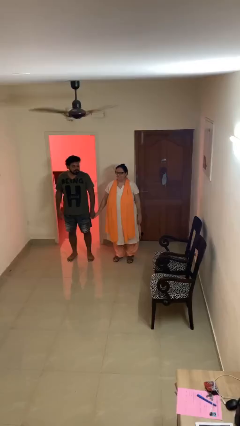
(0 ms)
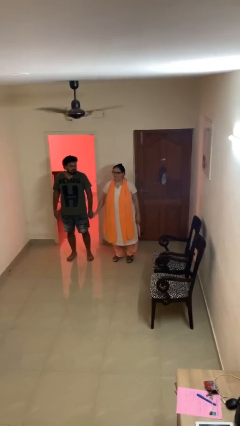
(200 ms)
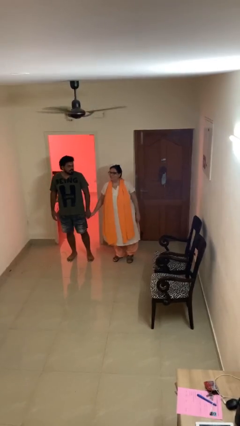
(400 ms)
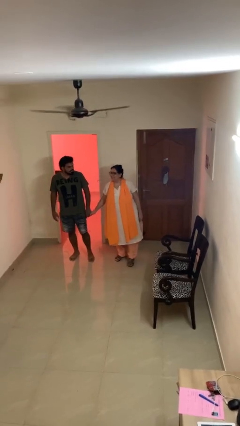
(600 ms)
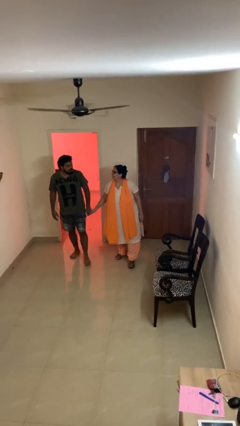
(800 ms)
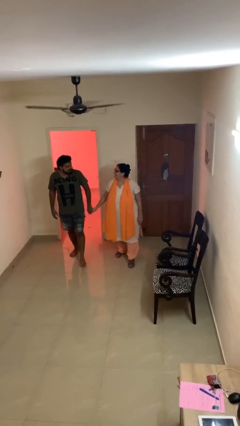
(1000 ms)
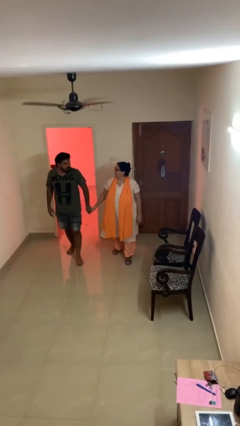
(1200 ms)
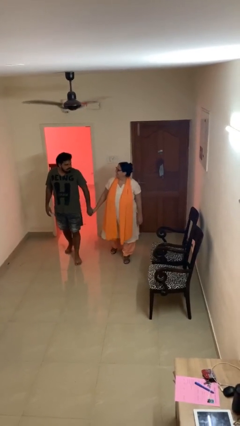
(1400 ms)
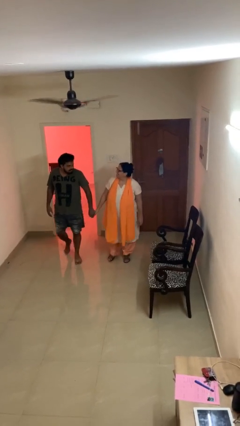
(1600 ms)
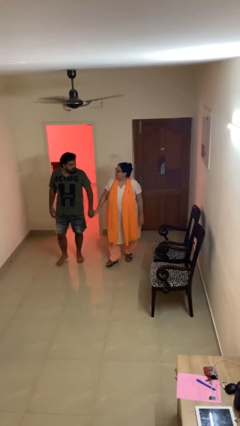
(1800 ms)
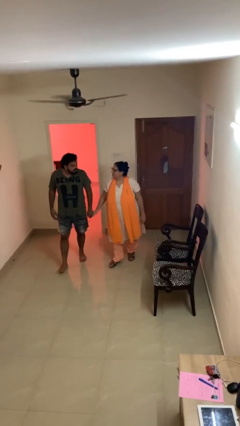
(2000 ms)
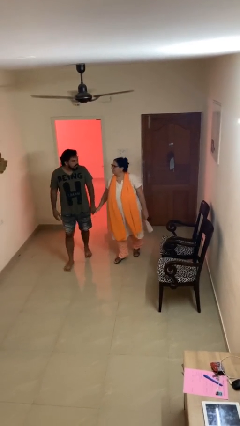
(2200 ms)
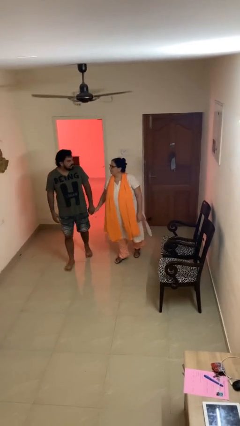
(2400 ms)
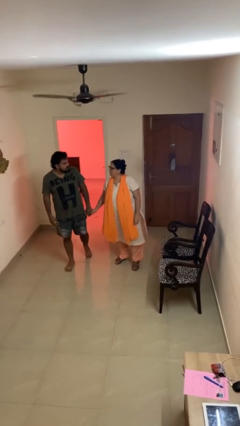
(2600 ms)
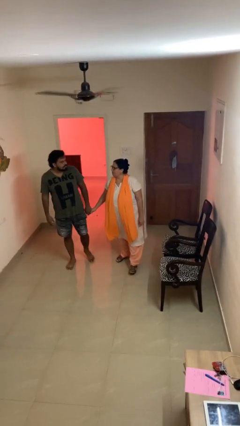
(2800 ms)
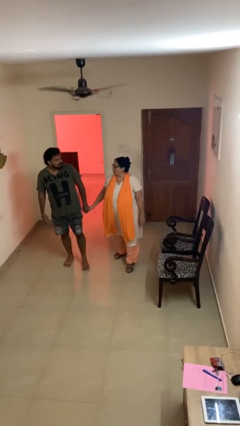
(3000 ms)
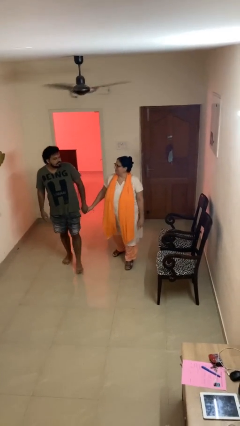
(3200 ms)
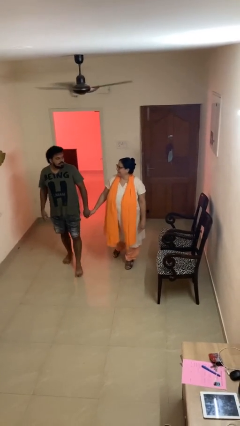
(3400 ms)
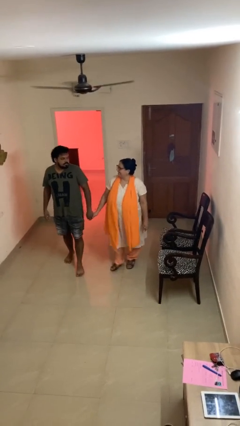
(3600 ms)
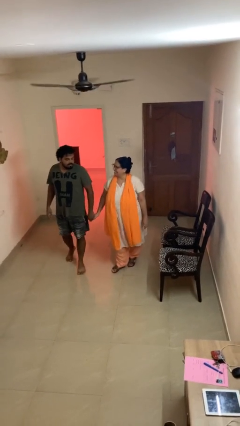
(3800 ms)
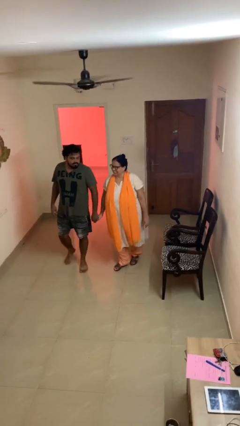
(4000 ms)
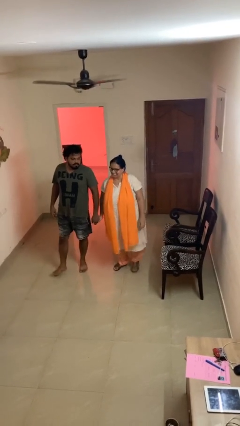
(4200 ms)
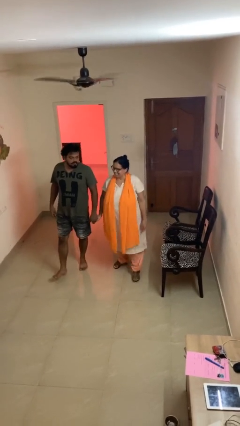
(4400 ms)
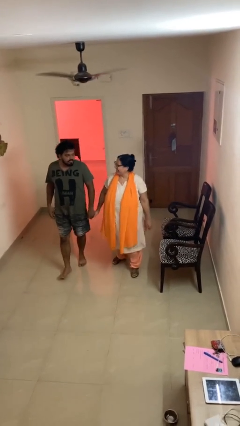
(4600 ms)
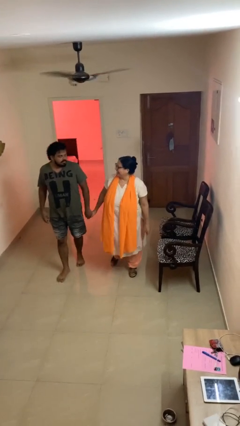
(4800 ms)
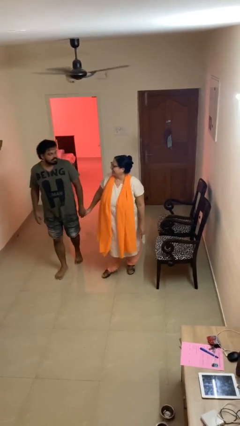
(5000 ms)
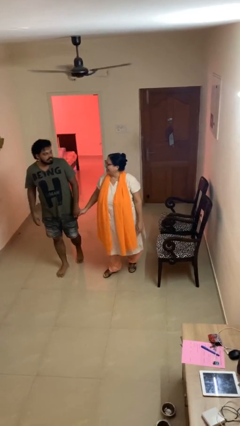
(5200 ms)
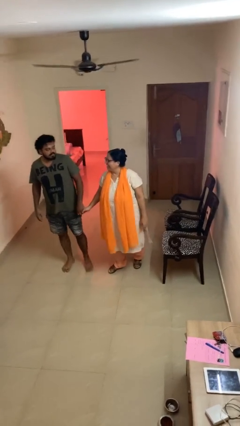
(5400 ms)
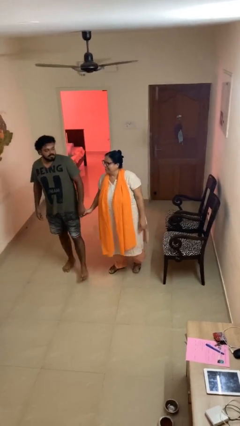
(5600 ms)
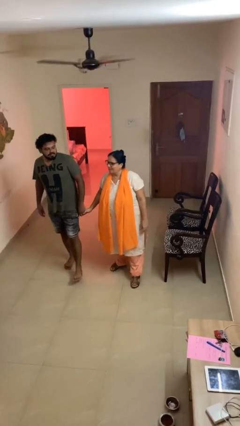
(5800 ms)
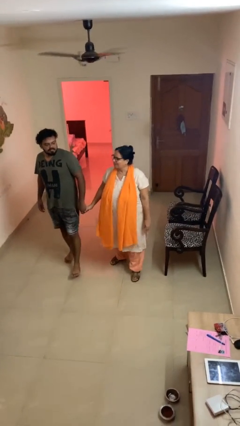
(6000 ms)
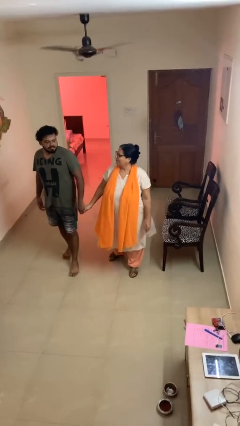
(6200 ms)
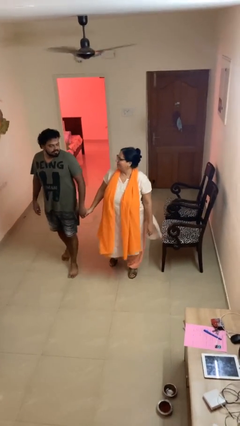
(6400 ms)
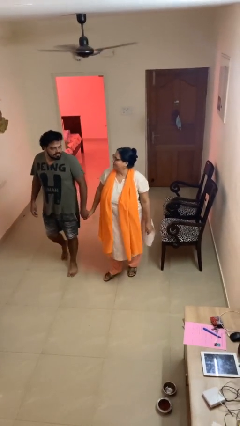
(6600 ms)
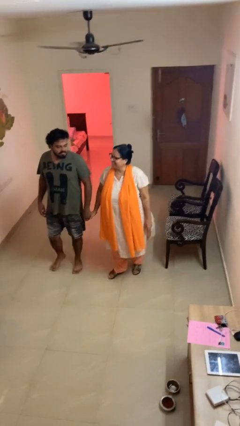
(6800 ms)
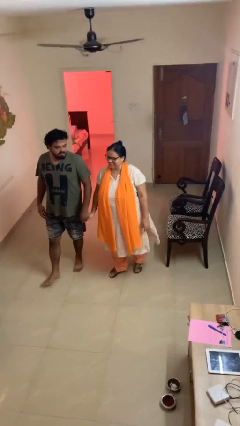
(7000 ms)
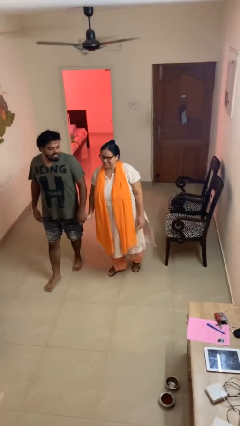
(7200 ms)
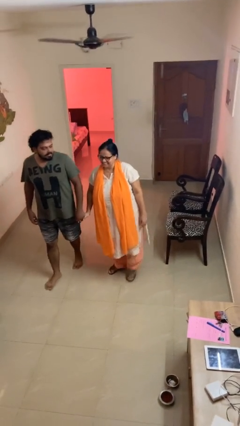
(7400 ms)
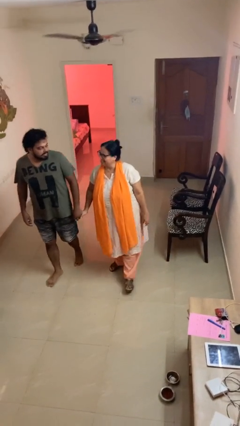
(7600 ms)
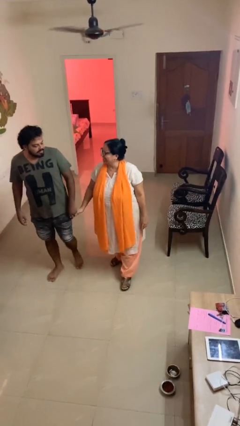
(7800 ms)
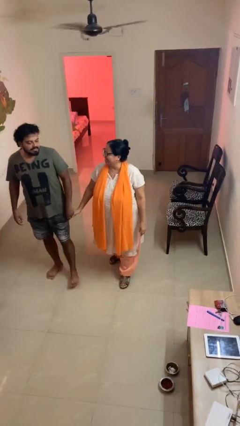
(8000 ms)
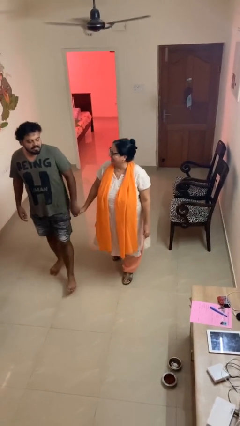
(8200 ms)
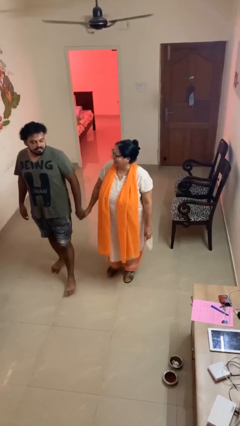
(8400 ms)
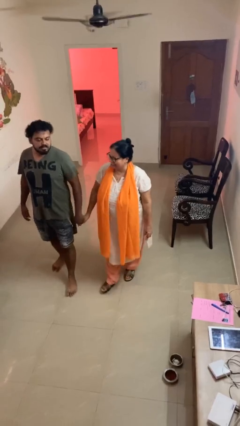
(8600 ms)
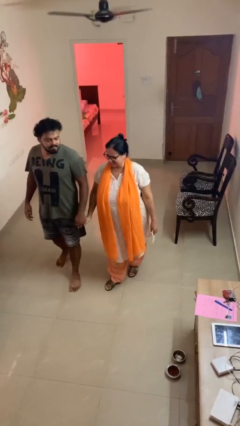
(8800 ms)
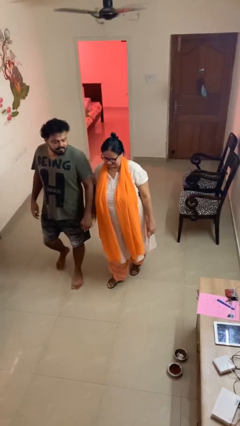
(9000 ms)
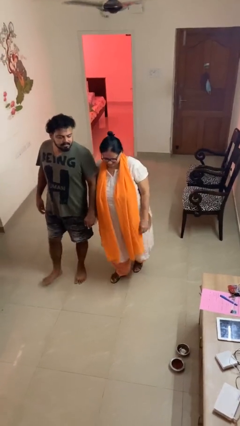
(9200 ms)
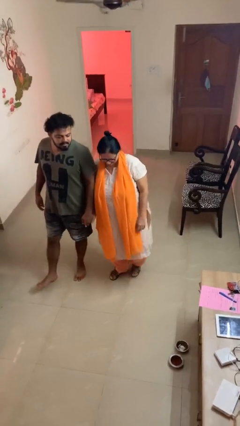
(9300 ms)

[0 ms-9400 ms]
person holds hand

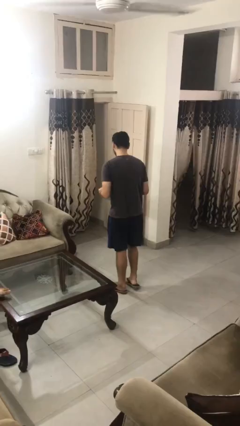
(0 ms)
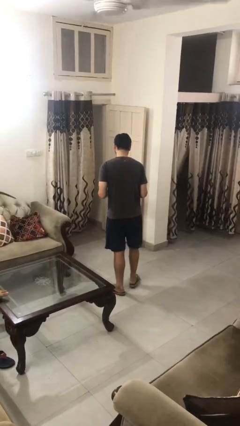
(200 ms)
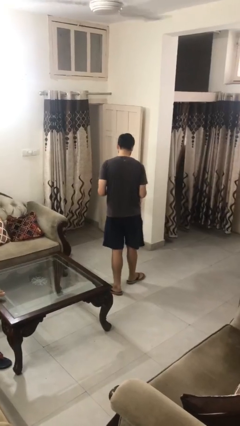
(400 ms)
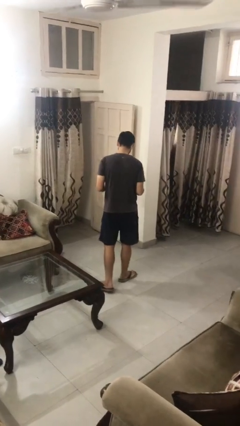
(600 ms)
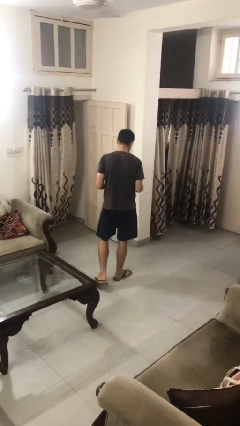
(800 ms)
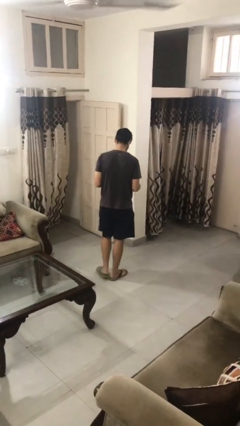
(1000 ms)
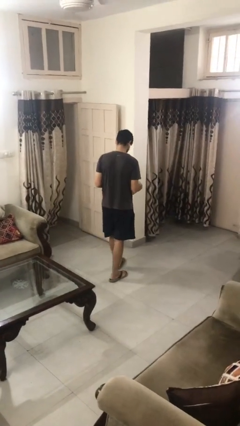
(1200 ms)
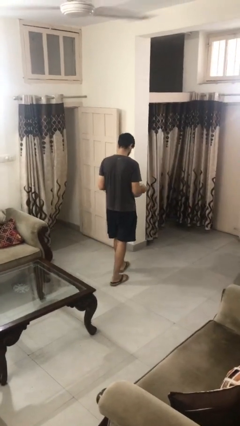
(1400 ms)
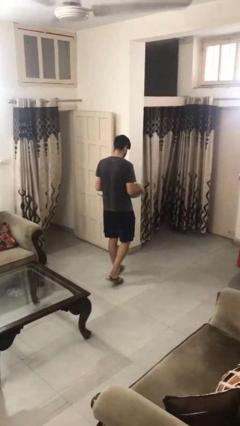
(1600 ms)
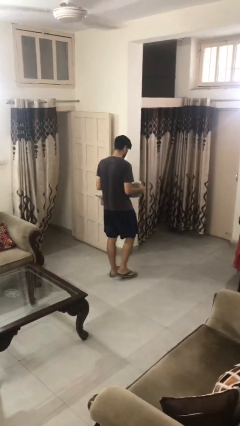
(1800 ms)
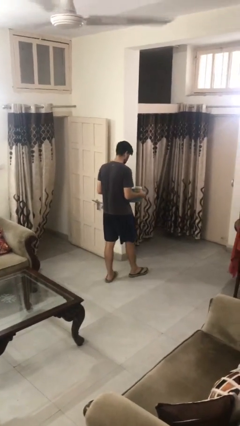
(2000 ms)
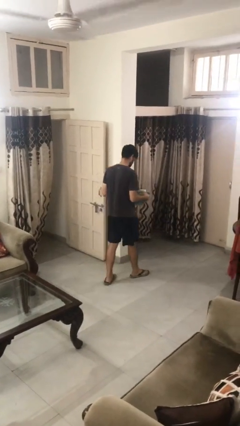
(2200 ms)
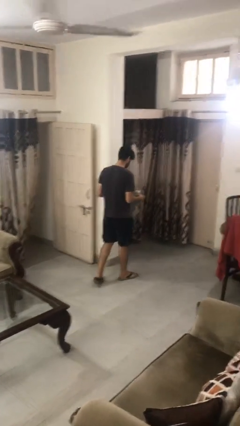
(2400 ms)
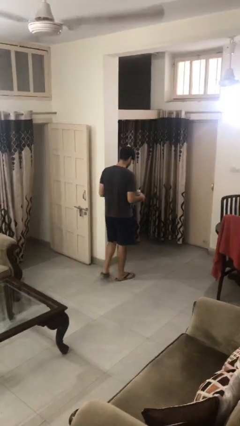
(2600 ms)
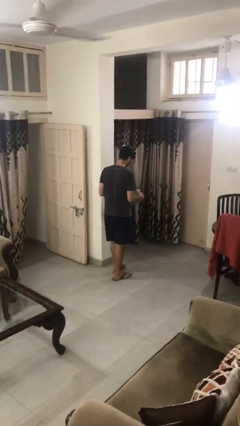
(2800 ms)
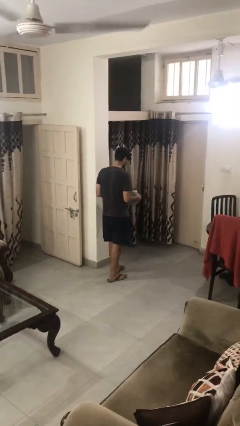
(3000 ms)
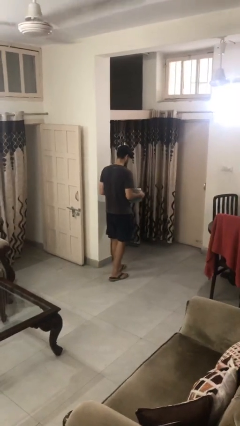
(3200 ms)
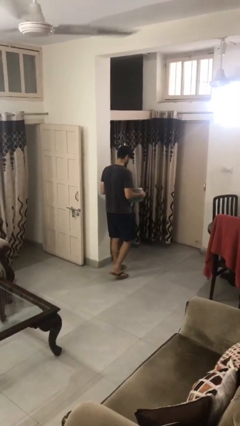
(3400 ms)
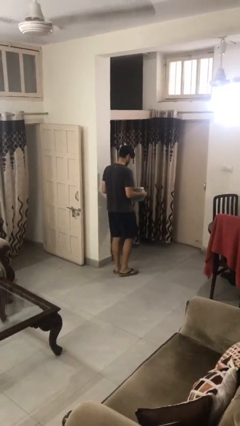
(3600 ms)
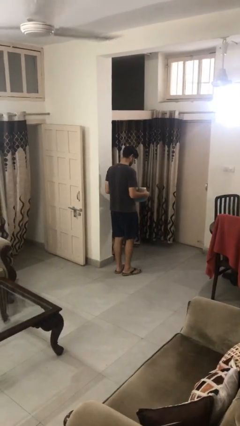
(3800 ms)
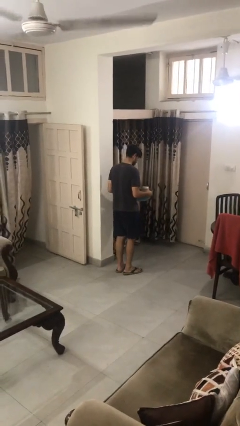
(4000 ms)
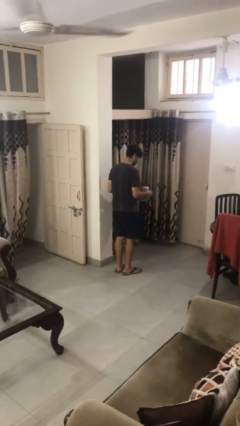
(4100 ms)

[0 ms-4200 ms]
person carries groceries

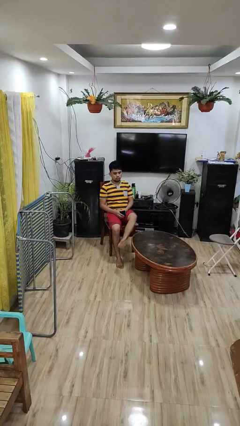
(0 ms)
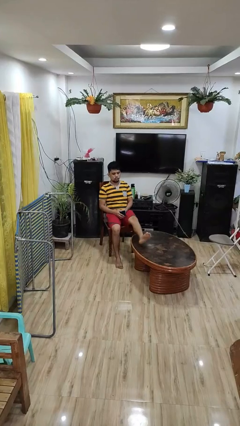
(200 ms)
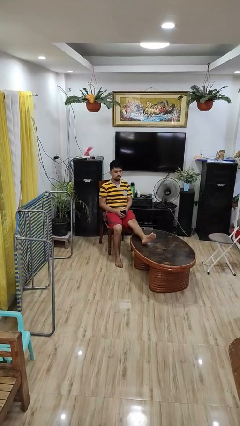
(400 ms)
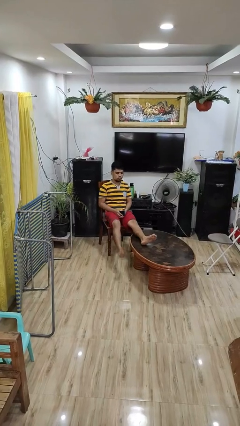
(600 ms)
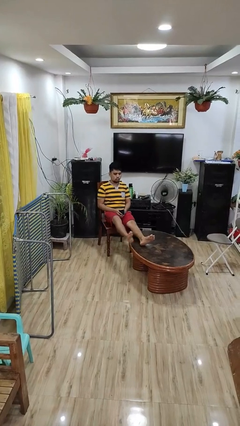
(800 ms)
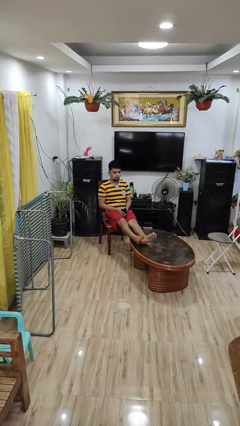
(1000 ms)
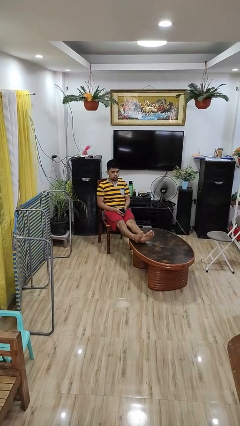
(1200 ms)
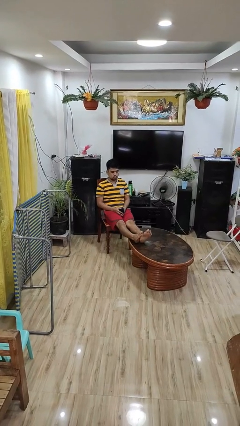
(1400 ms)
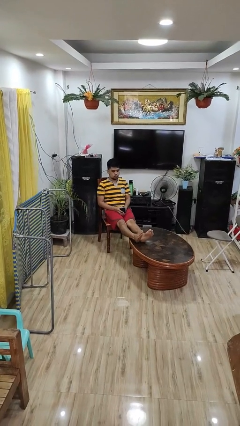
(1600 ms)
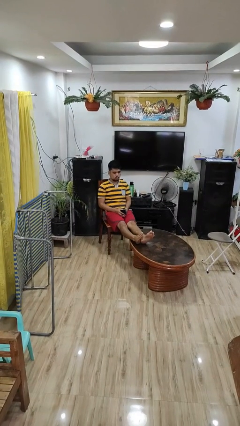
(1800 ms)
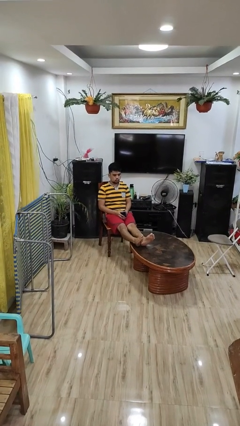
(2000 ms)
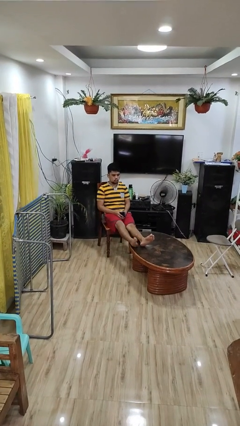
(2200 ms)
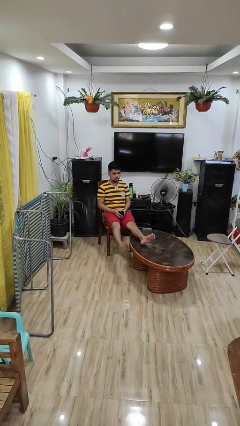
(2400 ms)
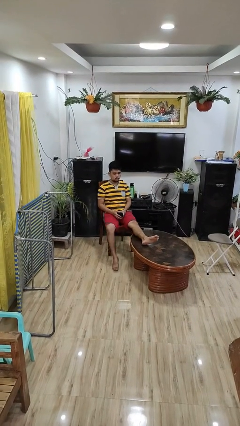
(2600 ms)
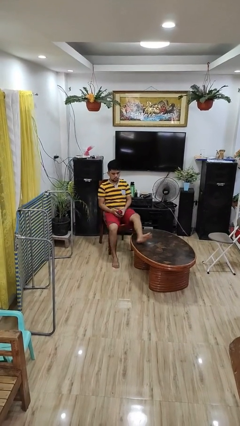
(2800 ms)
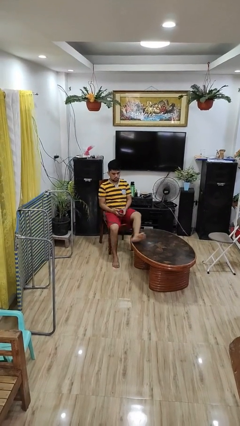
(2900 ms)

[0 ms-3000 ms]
person puts feet up

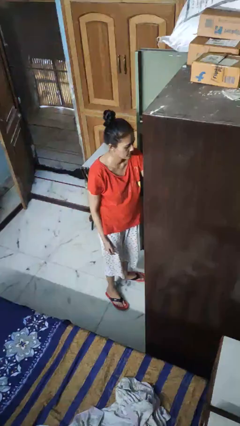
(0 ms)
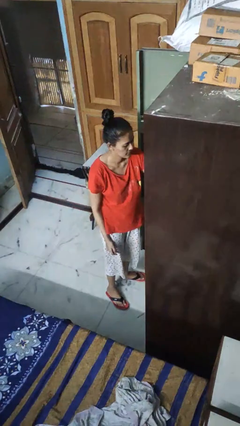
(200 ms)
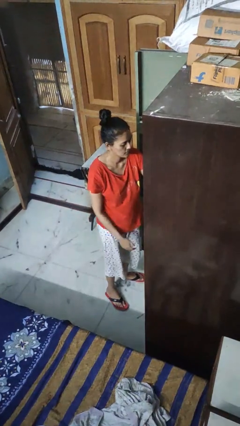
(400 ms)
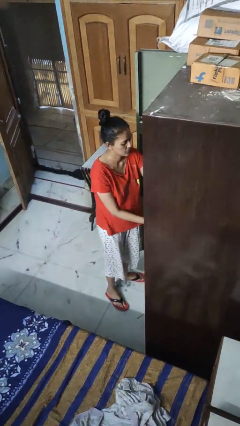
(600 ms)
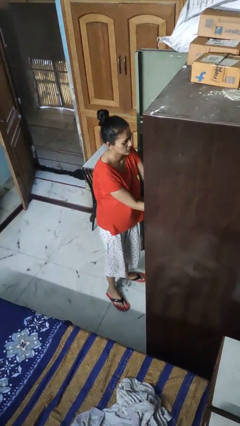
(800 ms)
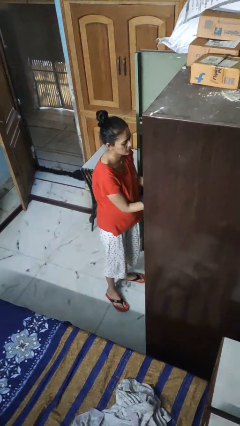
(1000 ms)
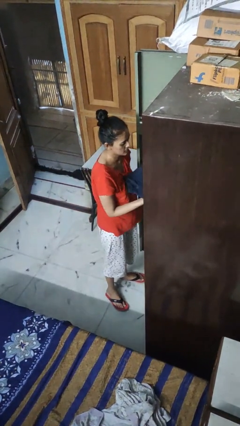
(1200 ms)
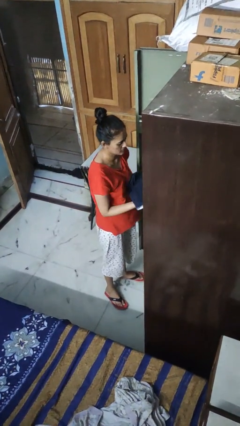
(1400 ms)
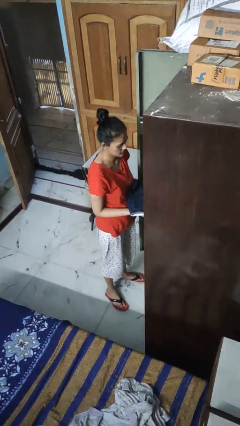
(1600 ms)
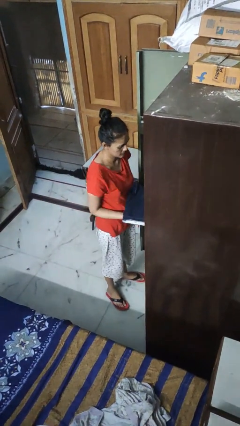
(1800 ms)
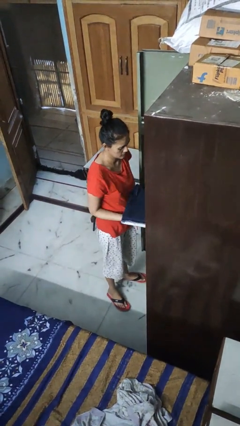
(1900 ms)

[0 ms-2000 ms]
person takes clothes from dresser
